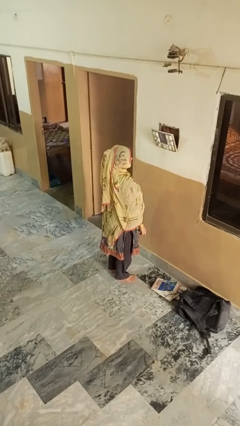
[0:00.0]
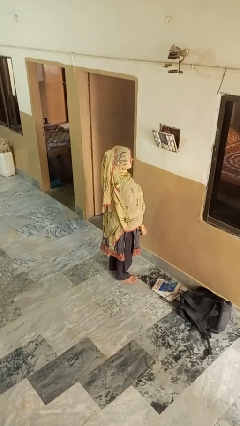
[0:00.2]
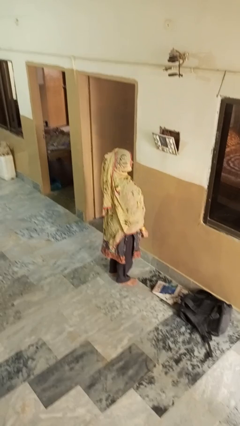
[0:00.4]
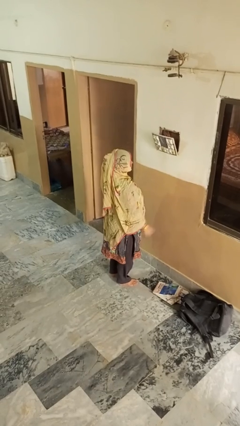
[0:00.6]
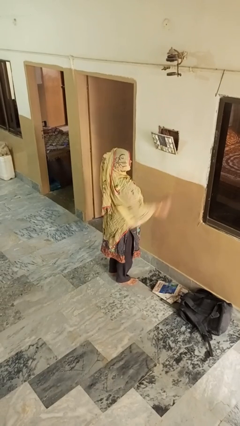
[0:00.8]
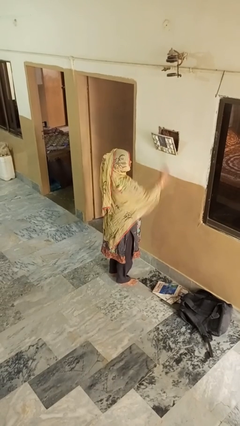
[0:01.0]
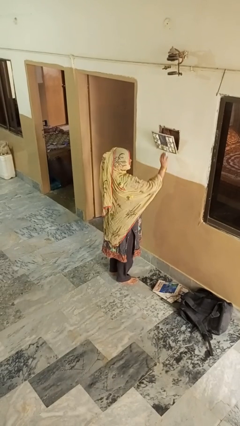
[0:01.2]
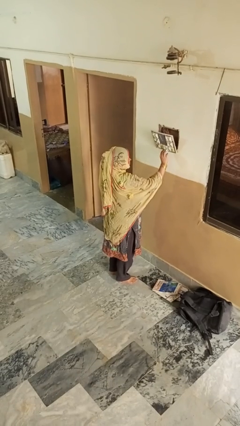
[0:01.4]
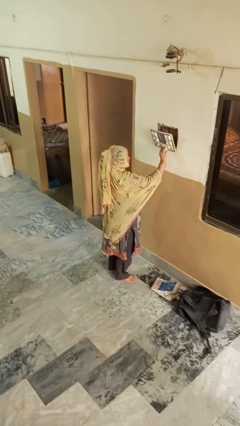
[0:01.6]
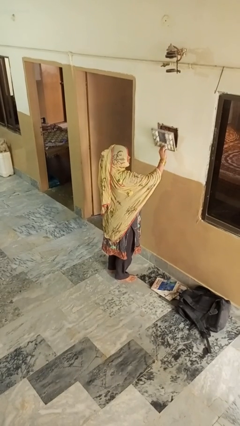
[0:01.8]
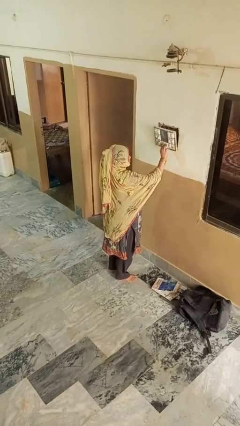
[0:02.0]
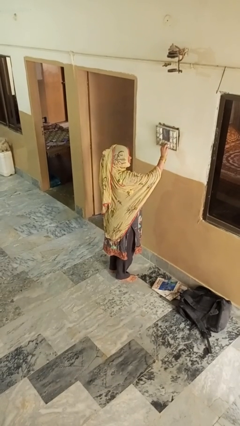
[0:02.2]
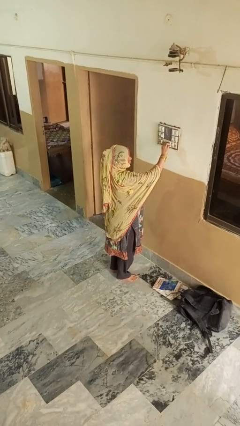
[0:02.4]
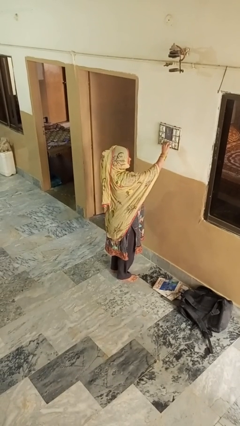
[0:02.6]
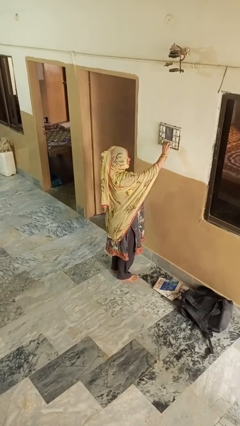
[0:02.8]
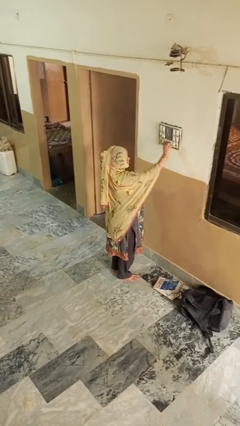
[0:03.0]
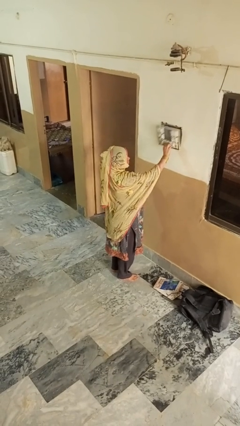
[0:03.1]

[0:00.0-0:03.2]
person plugs into electrical socket

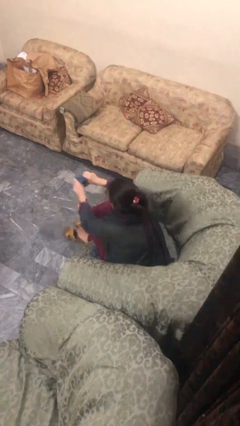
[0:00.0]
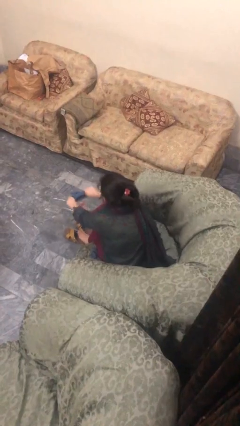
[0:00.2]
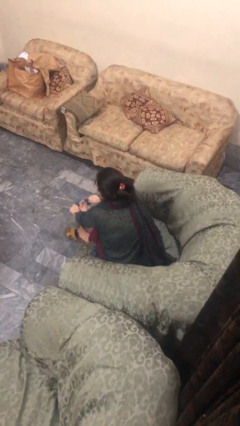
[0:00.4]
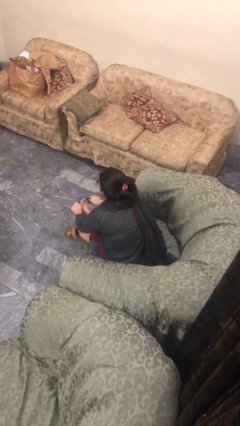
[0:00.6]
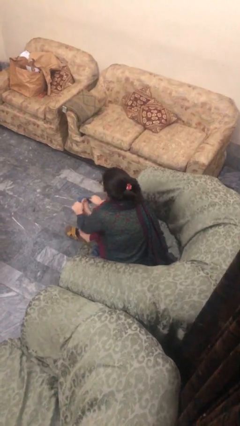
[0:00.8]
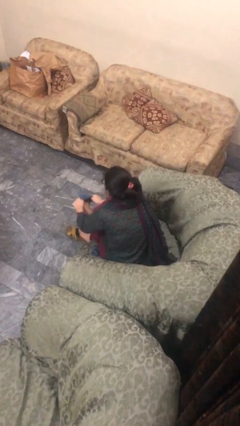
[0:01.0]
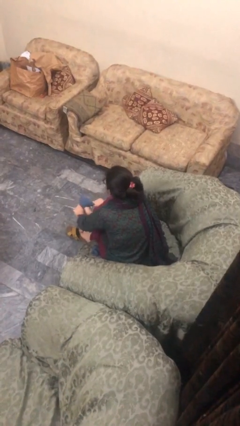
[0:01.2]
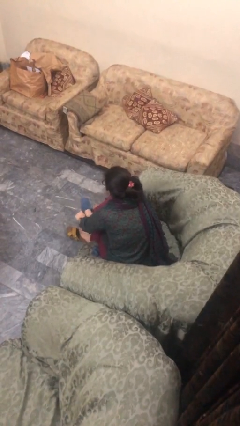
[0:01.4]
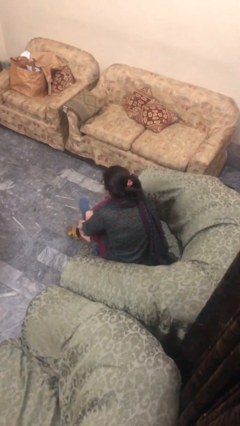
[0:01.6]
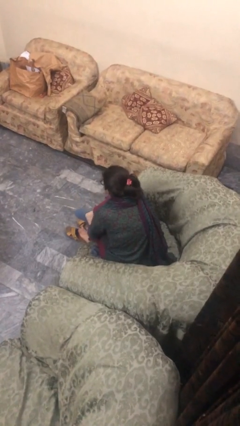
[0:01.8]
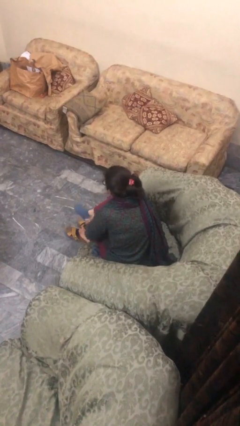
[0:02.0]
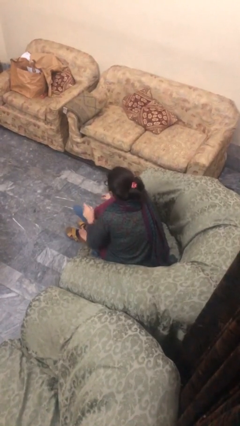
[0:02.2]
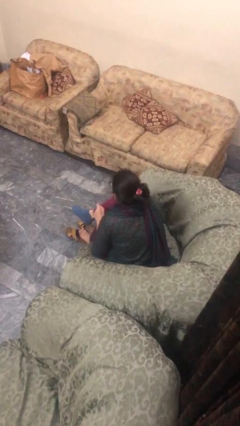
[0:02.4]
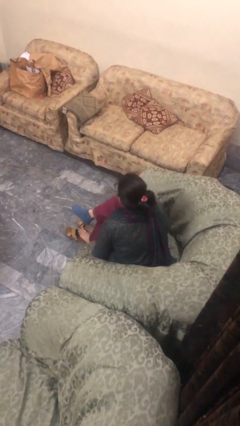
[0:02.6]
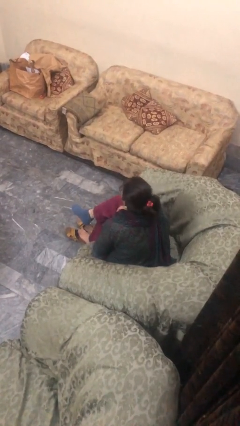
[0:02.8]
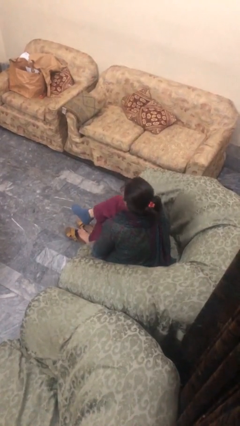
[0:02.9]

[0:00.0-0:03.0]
person puts on socks

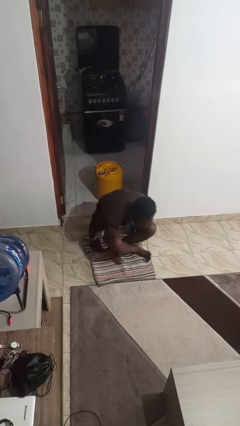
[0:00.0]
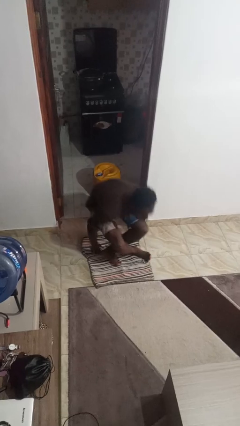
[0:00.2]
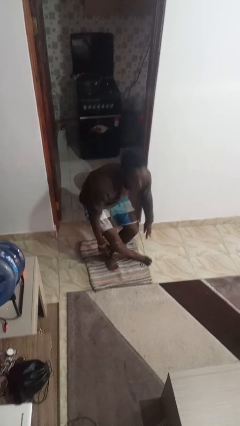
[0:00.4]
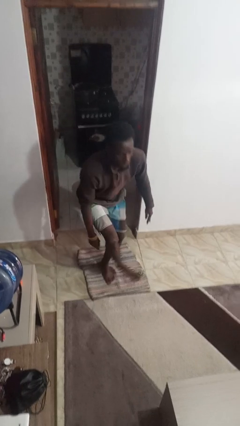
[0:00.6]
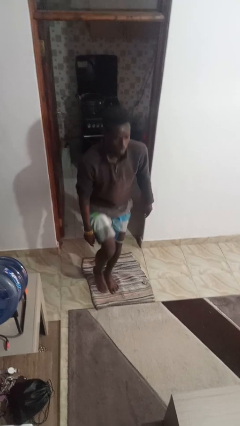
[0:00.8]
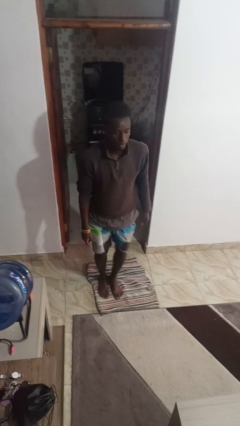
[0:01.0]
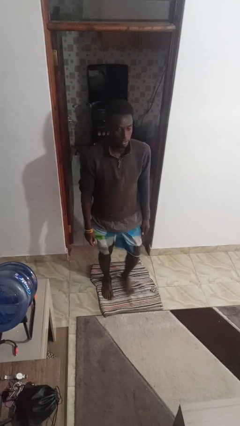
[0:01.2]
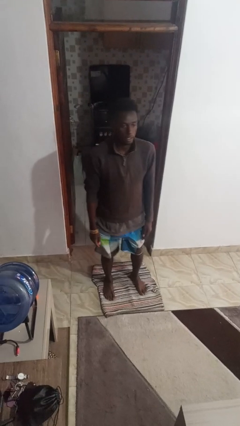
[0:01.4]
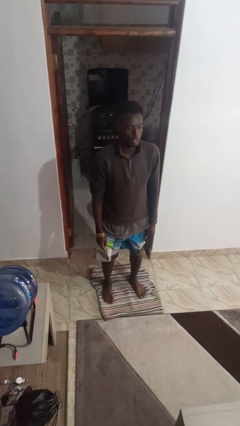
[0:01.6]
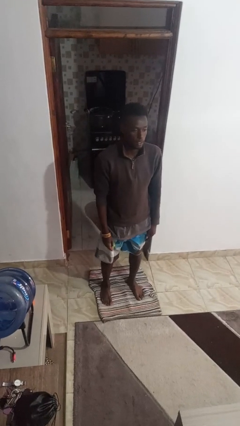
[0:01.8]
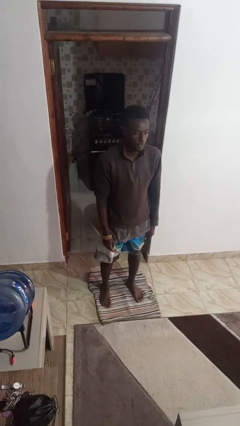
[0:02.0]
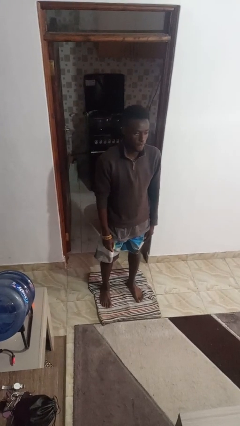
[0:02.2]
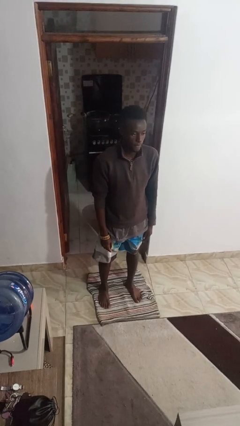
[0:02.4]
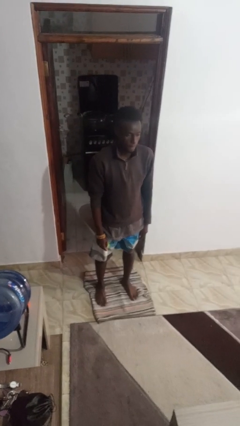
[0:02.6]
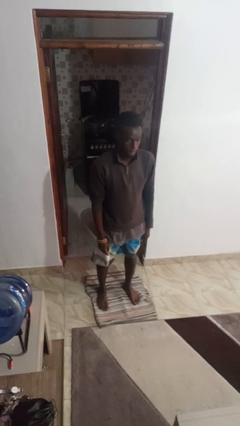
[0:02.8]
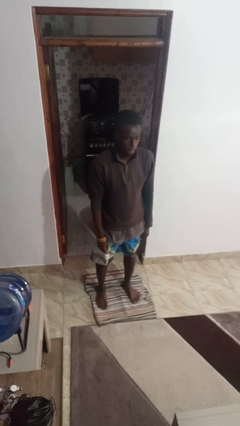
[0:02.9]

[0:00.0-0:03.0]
person stands up from floor

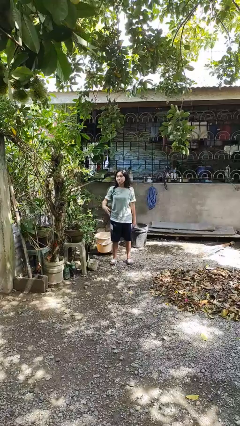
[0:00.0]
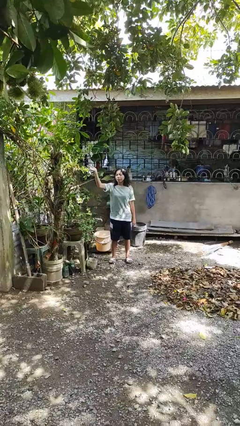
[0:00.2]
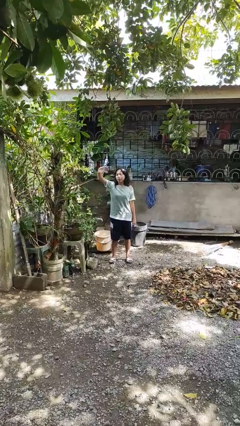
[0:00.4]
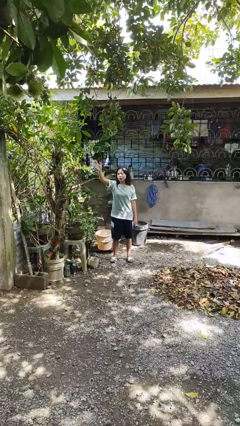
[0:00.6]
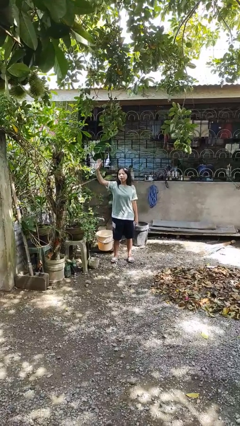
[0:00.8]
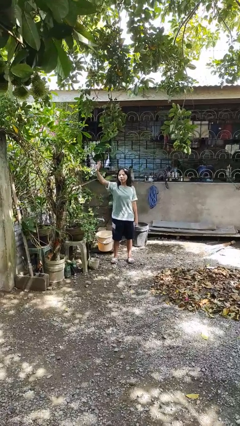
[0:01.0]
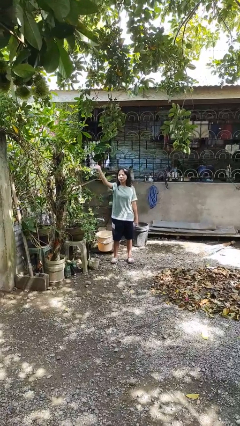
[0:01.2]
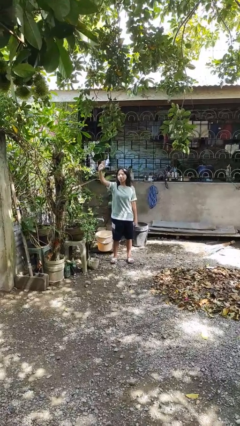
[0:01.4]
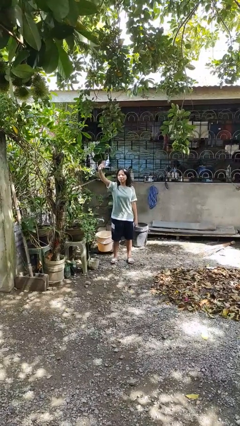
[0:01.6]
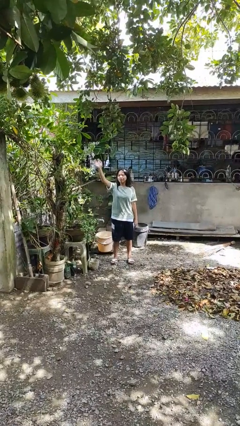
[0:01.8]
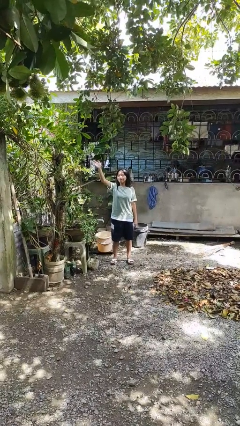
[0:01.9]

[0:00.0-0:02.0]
person waves at person

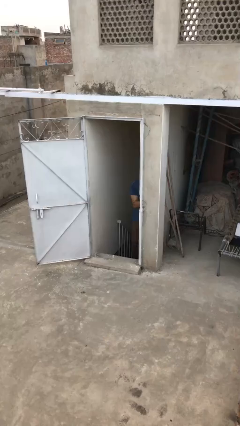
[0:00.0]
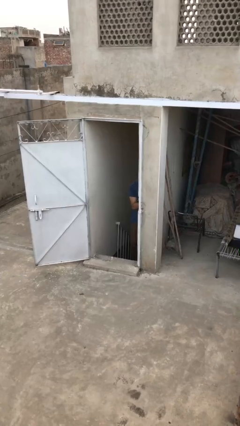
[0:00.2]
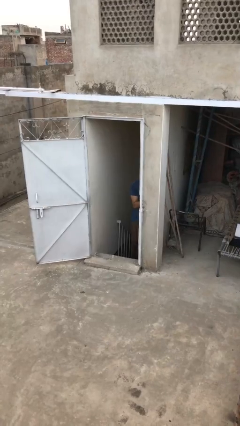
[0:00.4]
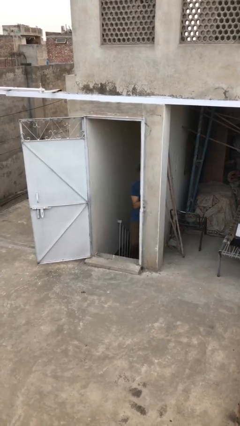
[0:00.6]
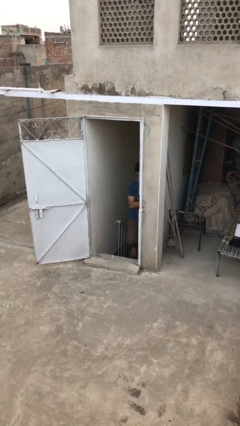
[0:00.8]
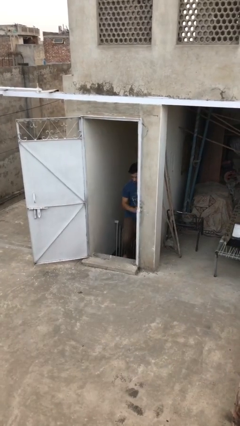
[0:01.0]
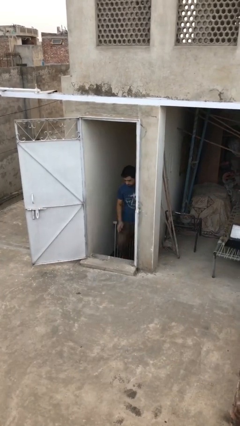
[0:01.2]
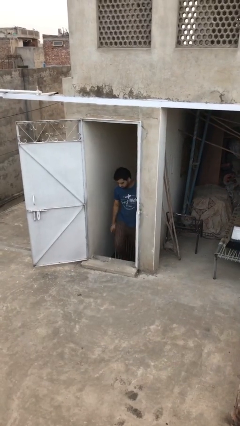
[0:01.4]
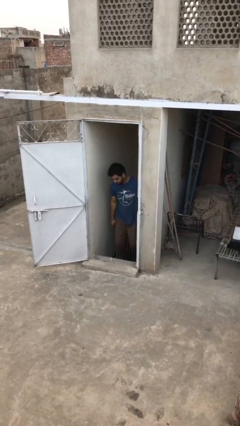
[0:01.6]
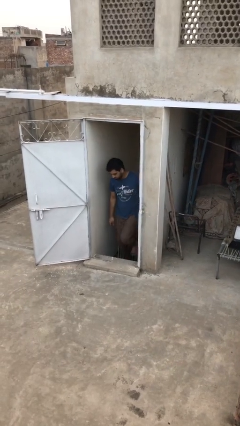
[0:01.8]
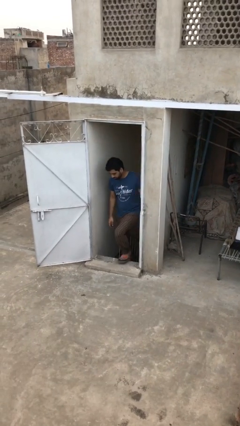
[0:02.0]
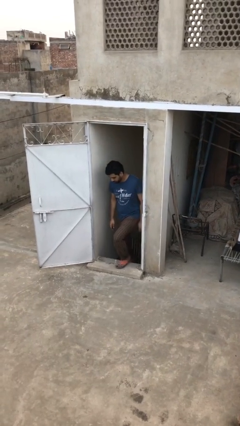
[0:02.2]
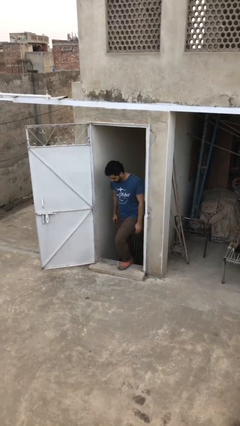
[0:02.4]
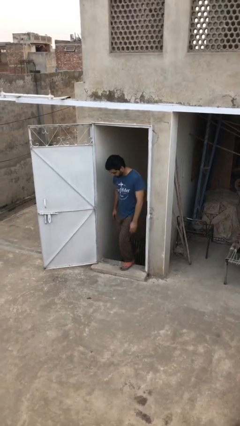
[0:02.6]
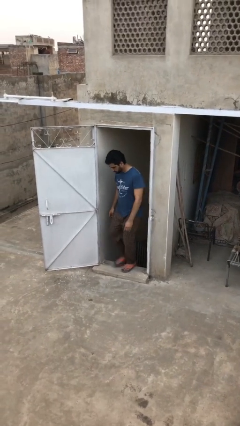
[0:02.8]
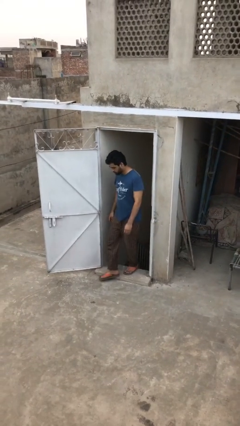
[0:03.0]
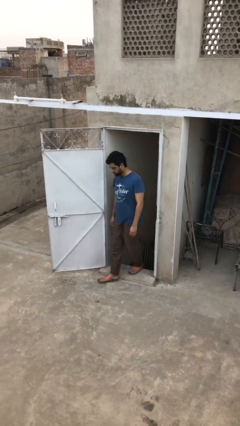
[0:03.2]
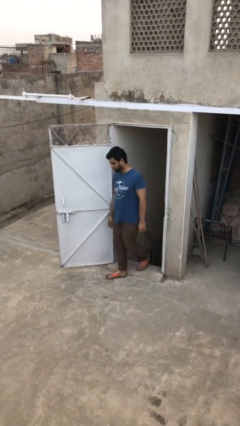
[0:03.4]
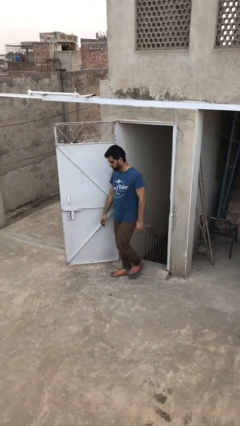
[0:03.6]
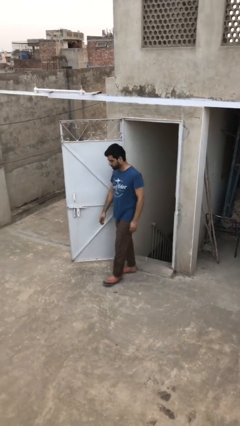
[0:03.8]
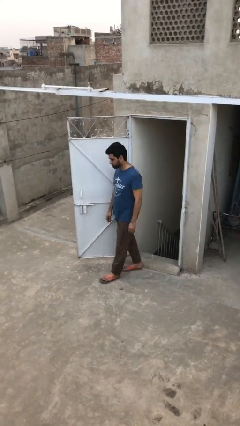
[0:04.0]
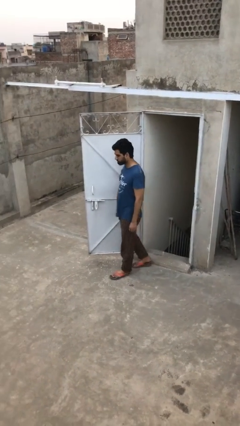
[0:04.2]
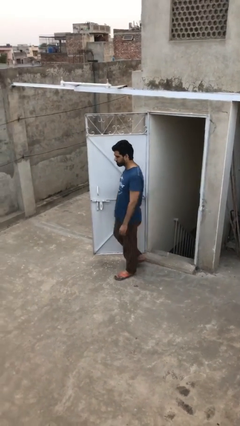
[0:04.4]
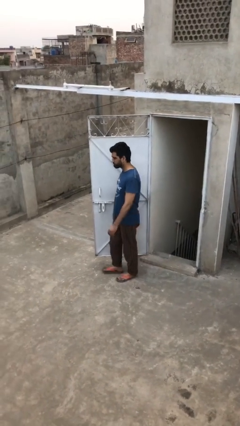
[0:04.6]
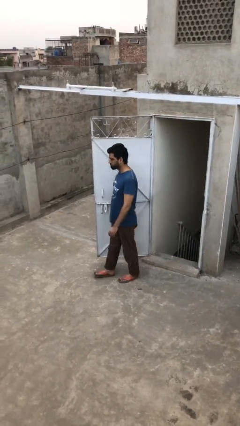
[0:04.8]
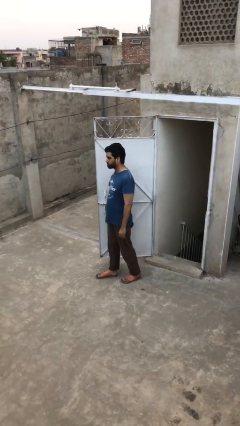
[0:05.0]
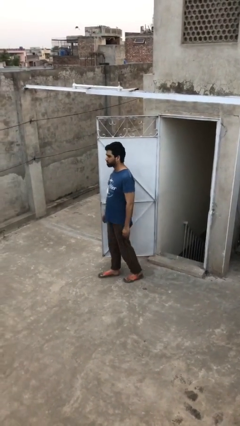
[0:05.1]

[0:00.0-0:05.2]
person enters scene through structure

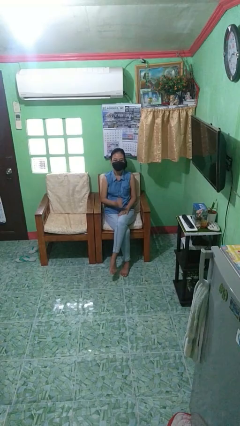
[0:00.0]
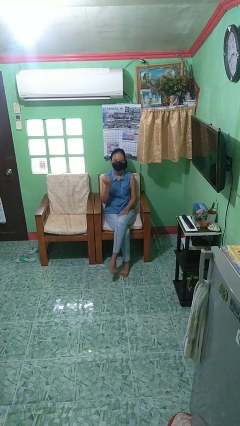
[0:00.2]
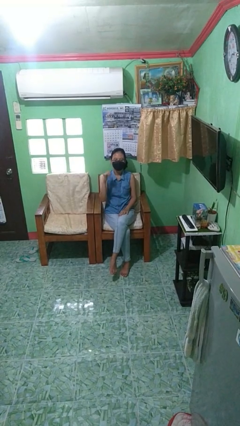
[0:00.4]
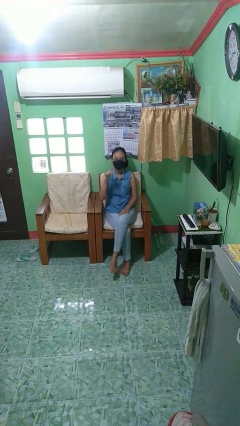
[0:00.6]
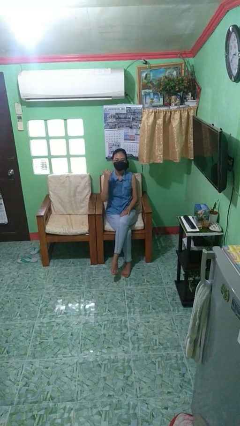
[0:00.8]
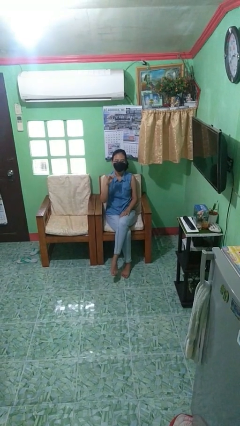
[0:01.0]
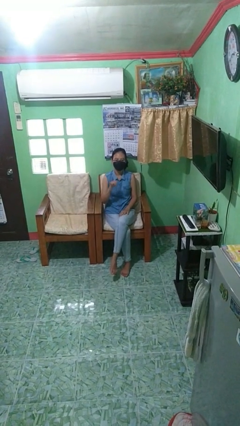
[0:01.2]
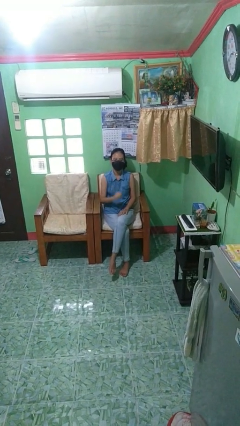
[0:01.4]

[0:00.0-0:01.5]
person gestures hang loose

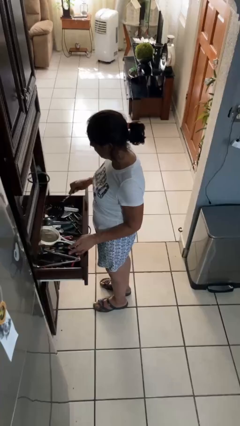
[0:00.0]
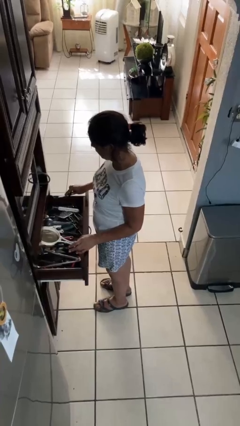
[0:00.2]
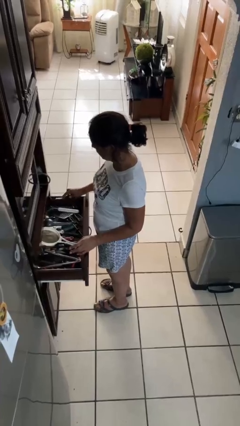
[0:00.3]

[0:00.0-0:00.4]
person puts object into kitchen drawer
